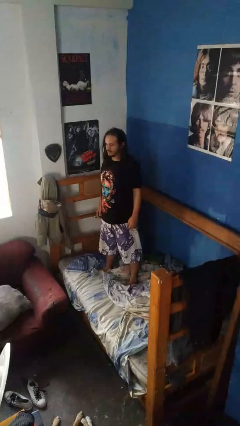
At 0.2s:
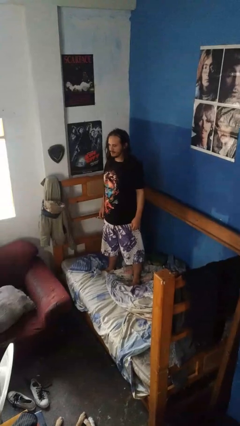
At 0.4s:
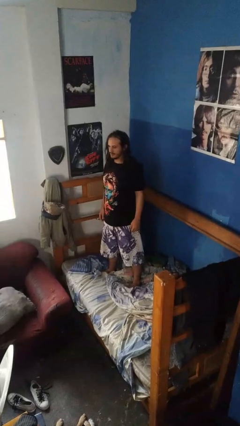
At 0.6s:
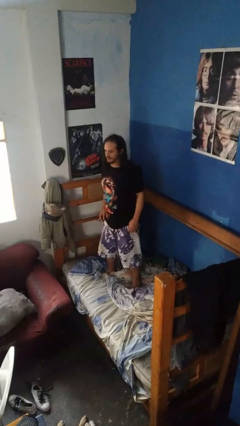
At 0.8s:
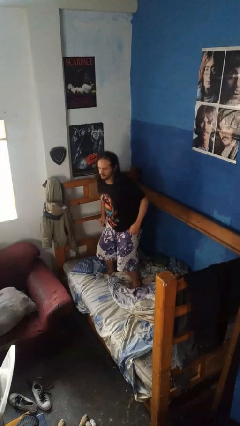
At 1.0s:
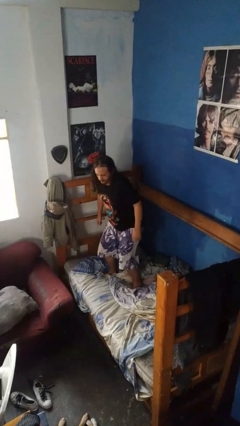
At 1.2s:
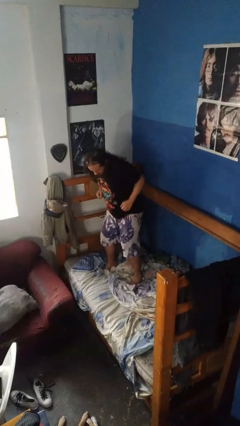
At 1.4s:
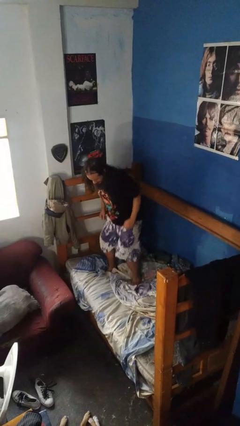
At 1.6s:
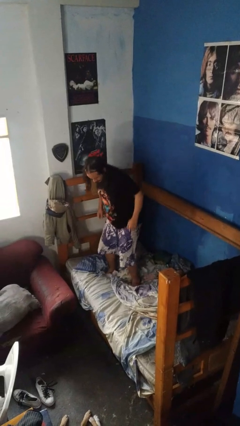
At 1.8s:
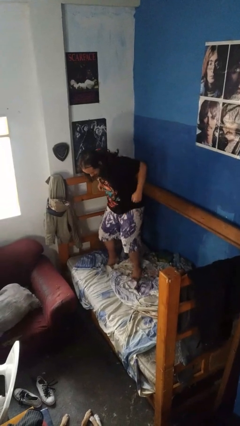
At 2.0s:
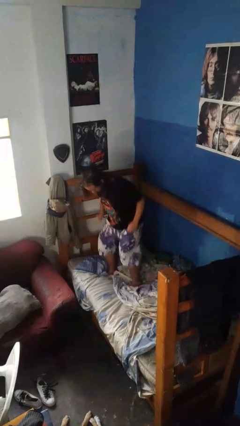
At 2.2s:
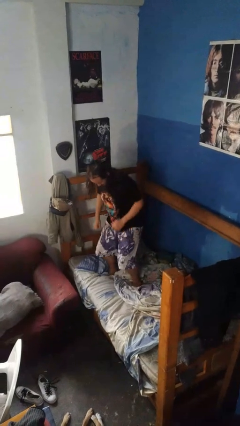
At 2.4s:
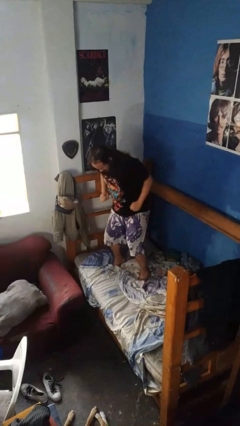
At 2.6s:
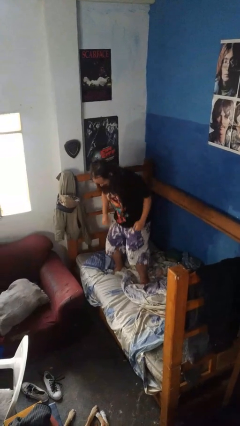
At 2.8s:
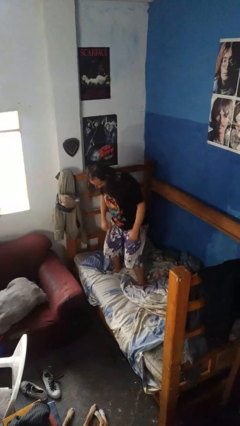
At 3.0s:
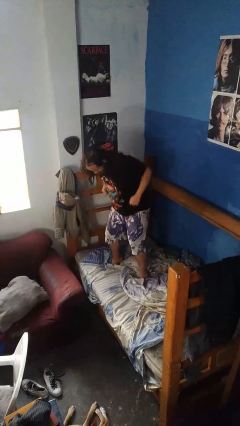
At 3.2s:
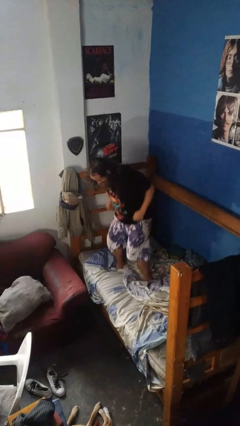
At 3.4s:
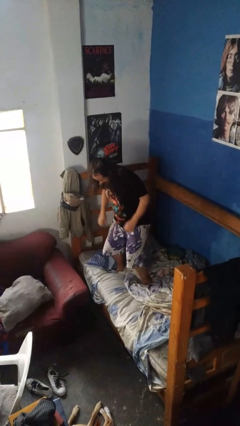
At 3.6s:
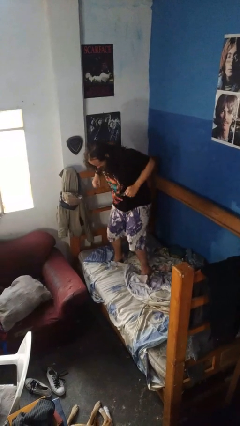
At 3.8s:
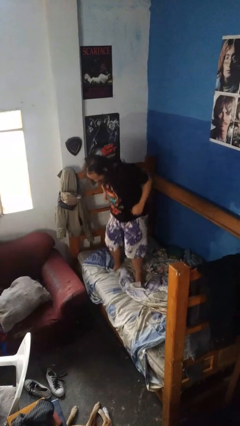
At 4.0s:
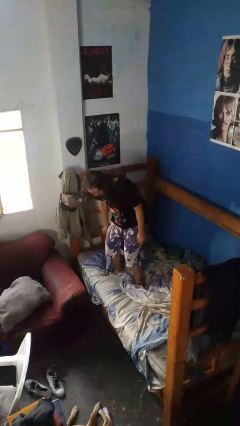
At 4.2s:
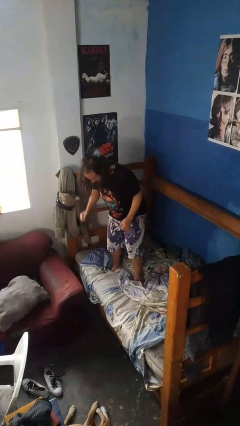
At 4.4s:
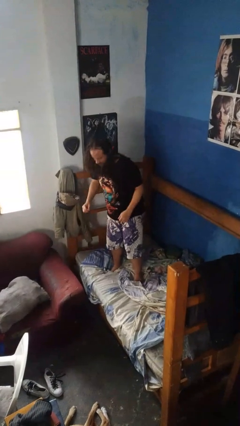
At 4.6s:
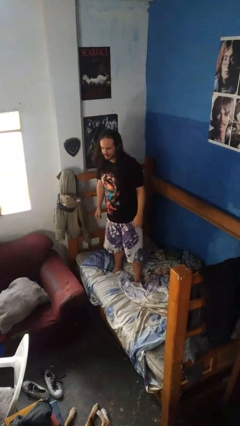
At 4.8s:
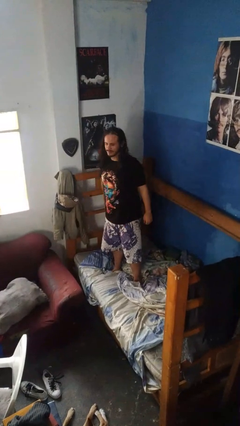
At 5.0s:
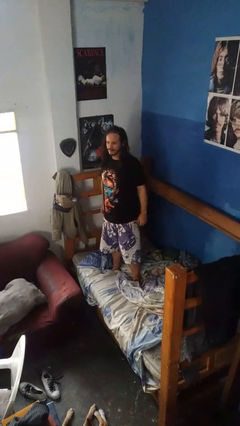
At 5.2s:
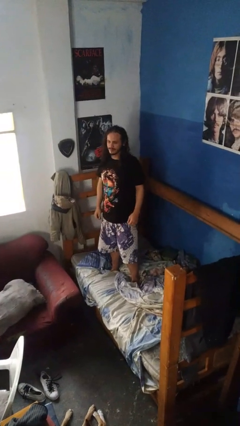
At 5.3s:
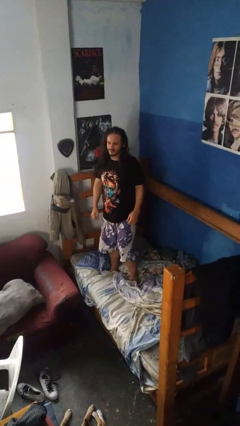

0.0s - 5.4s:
person jumps on bed

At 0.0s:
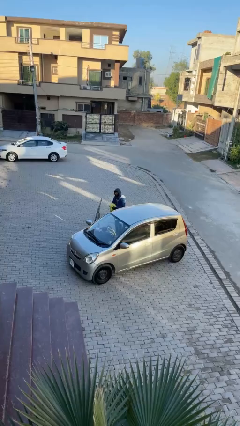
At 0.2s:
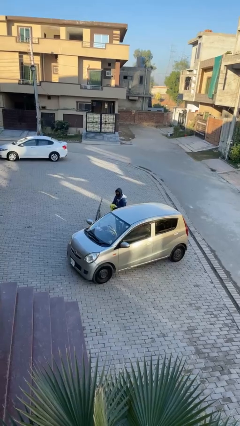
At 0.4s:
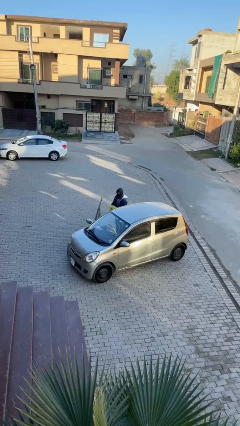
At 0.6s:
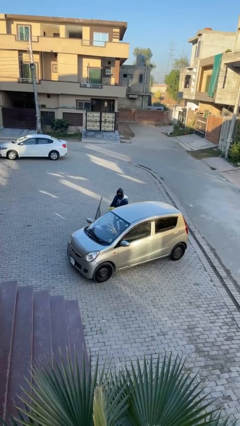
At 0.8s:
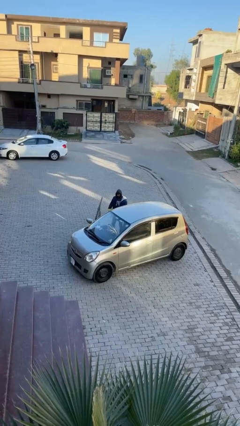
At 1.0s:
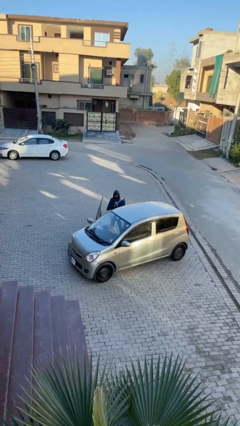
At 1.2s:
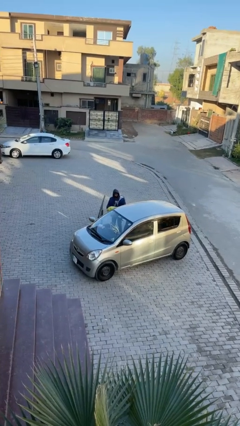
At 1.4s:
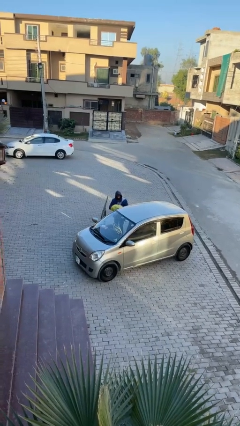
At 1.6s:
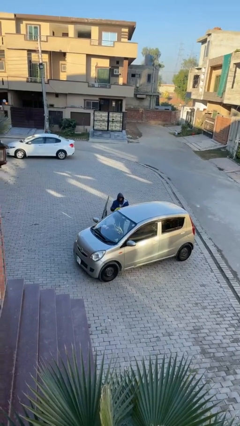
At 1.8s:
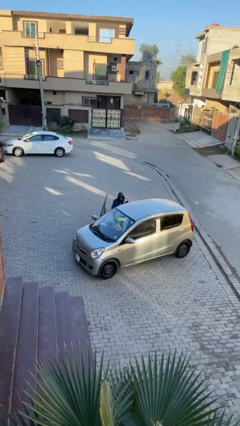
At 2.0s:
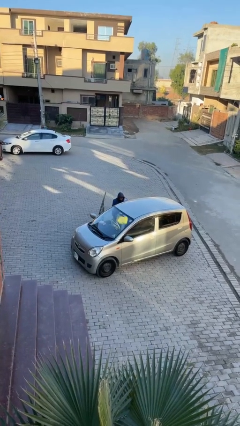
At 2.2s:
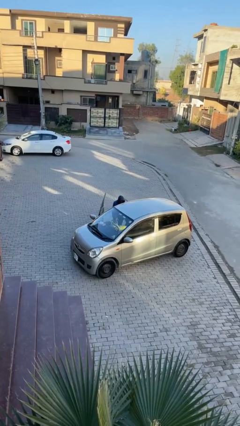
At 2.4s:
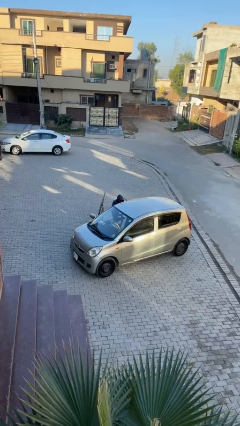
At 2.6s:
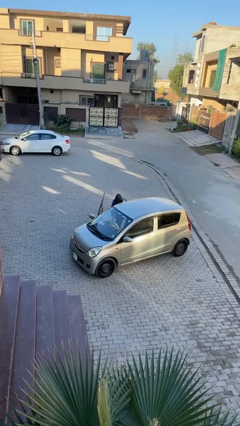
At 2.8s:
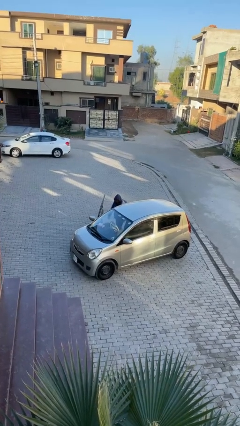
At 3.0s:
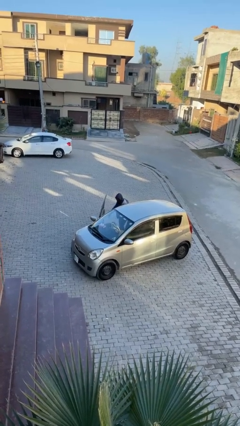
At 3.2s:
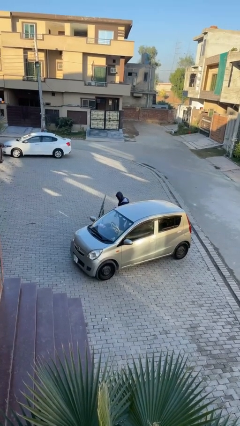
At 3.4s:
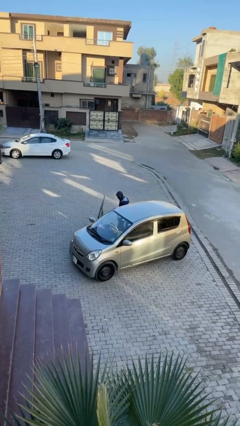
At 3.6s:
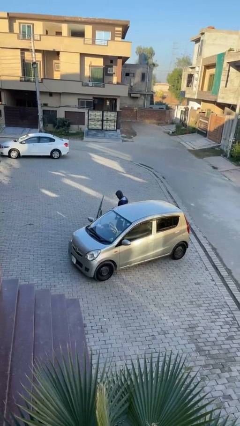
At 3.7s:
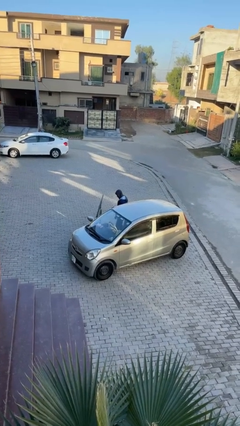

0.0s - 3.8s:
person loads car

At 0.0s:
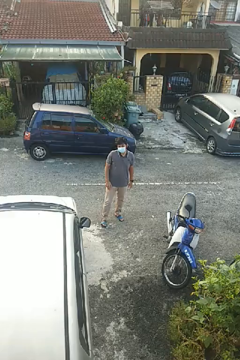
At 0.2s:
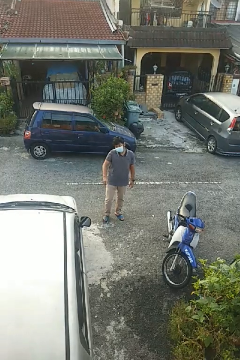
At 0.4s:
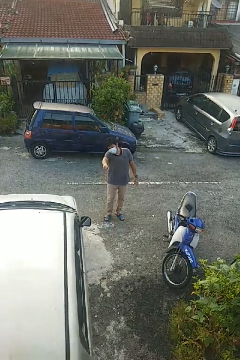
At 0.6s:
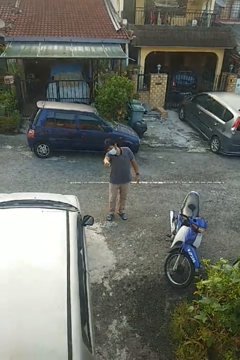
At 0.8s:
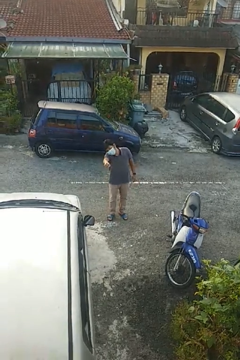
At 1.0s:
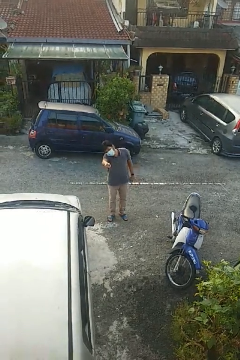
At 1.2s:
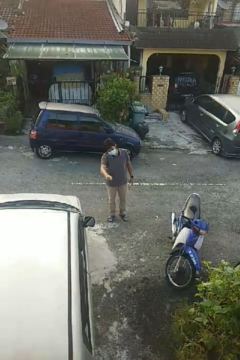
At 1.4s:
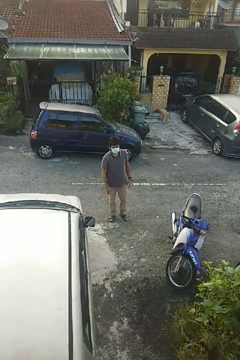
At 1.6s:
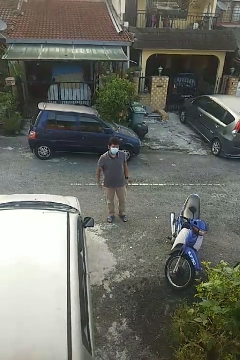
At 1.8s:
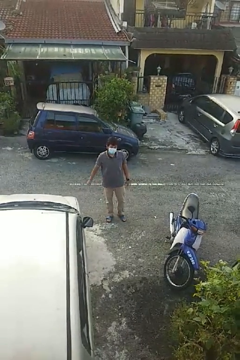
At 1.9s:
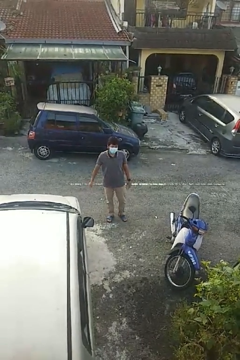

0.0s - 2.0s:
person points at person

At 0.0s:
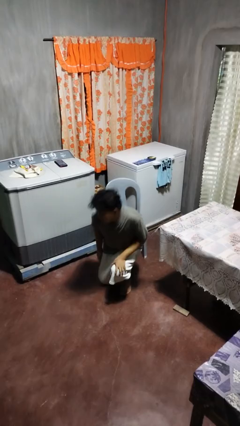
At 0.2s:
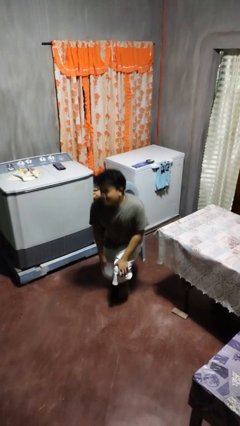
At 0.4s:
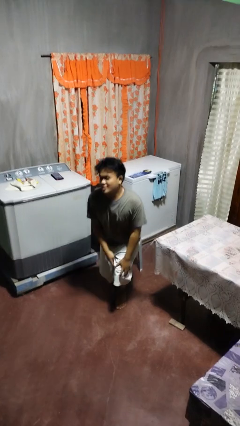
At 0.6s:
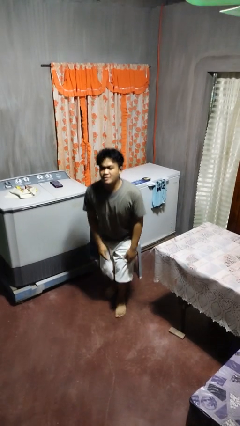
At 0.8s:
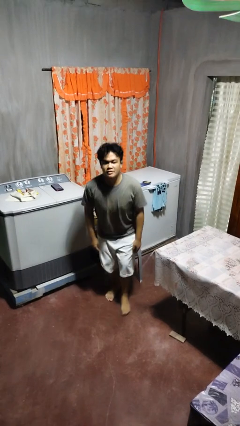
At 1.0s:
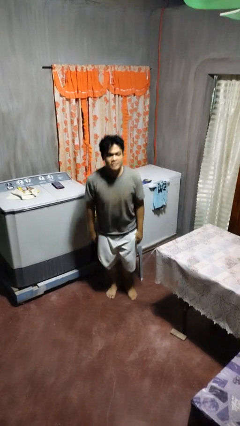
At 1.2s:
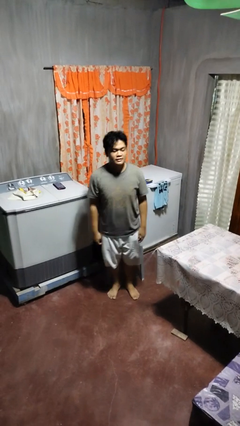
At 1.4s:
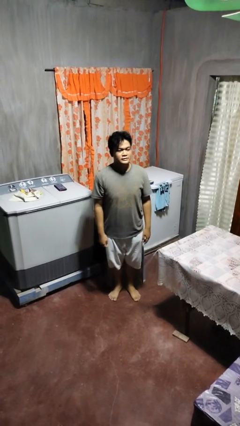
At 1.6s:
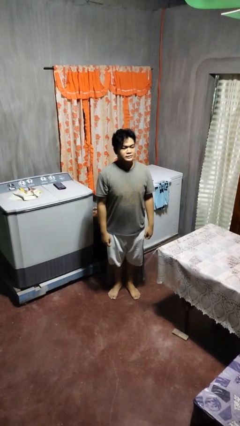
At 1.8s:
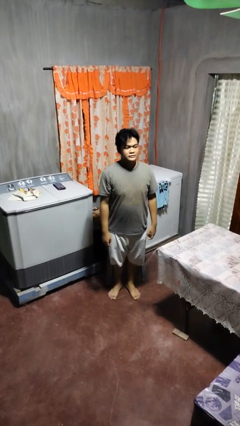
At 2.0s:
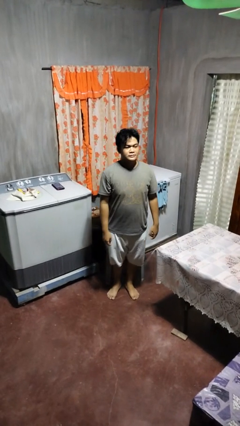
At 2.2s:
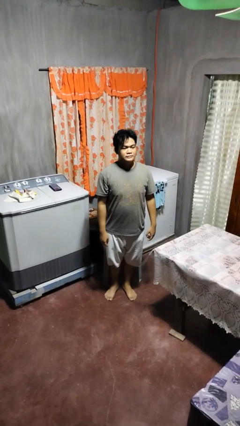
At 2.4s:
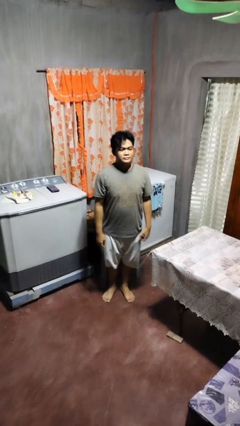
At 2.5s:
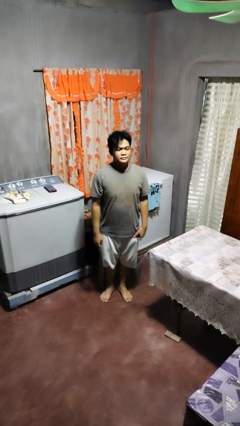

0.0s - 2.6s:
person stands up from floor

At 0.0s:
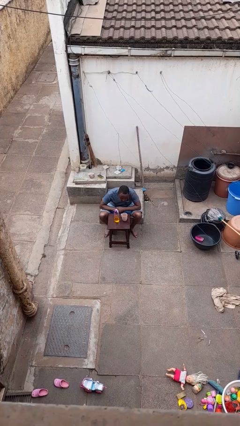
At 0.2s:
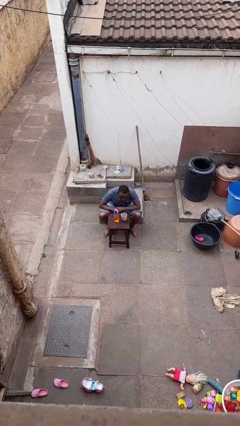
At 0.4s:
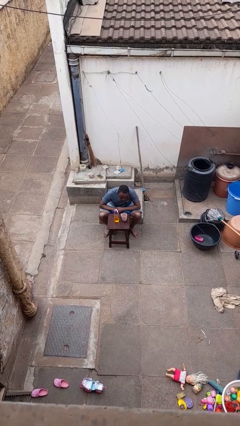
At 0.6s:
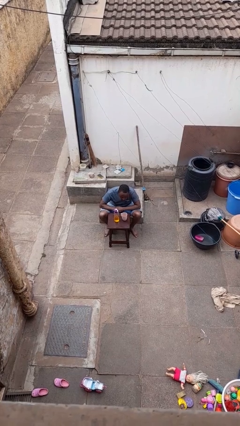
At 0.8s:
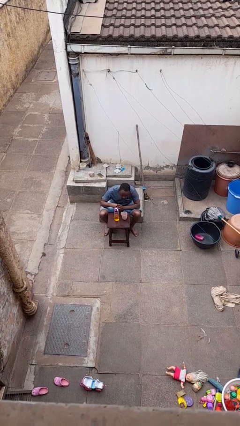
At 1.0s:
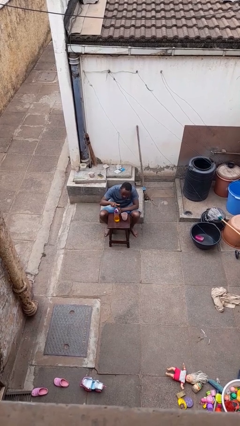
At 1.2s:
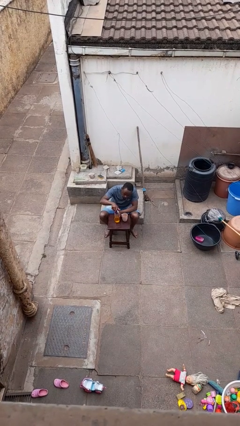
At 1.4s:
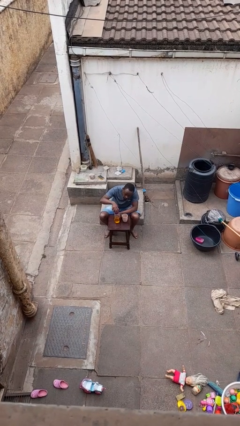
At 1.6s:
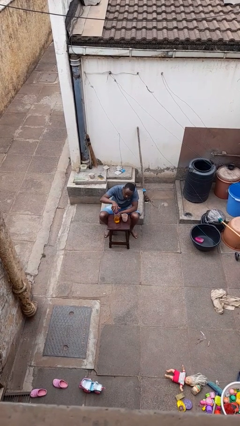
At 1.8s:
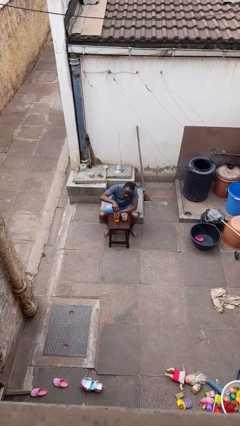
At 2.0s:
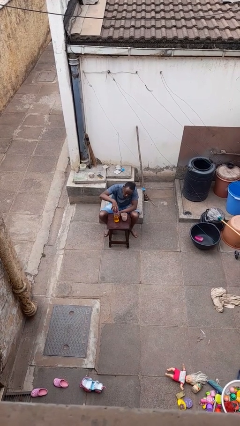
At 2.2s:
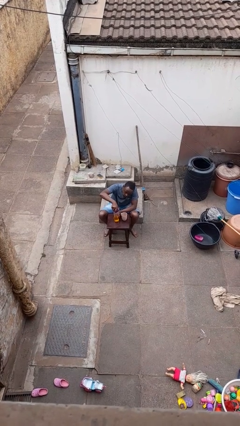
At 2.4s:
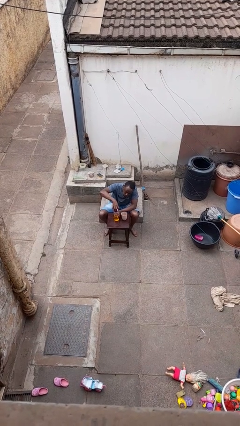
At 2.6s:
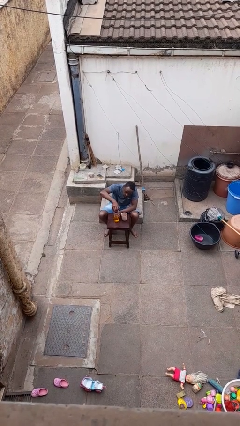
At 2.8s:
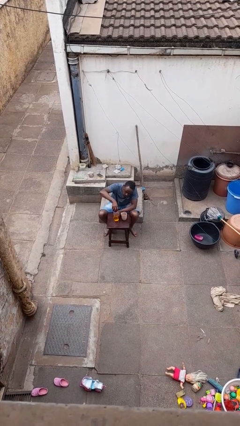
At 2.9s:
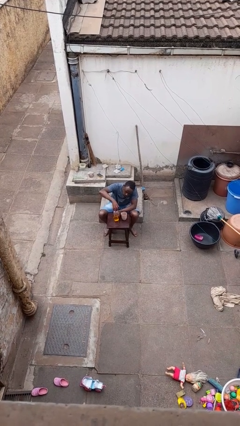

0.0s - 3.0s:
person unscrews lid from bottle

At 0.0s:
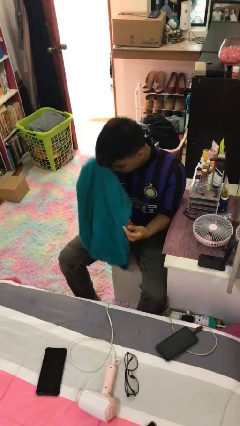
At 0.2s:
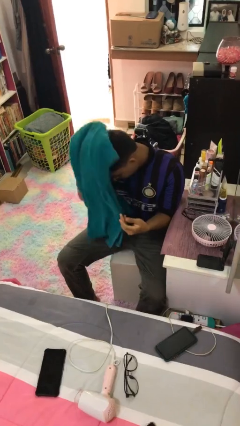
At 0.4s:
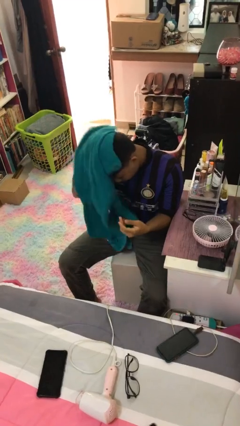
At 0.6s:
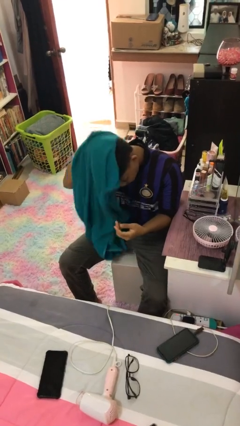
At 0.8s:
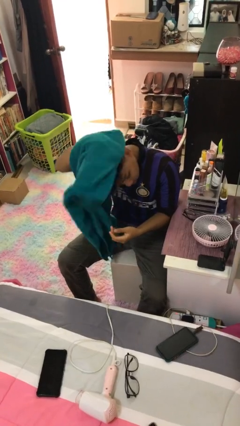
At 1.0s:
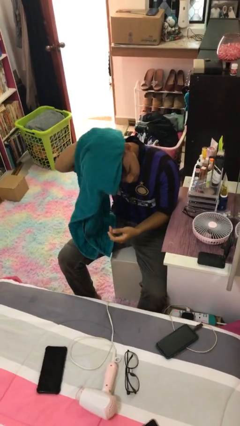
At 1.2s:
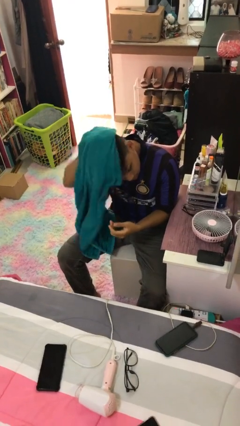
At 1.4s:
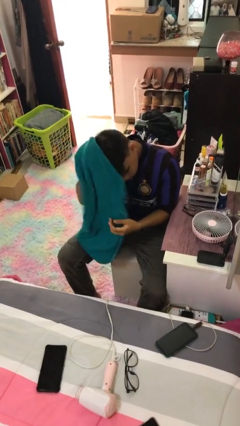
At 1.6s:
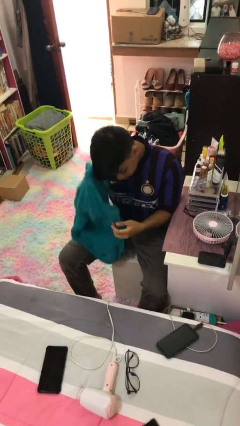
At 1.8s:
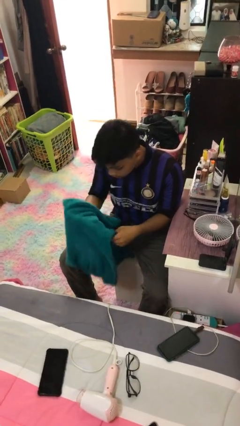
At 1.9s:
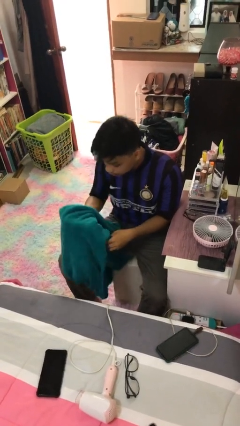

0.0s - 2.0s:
person dries hair with towel
